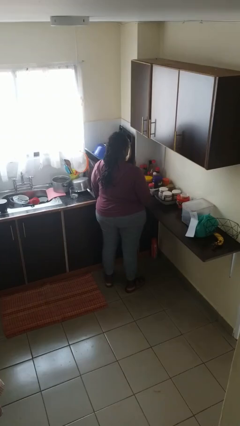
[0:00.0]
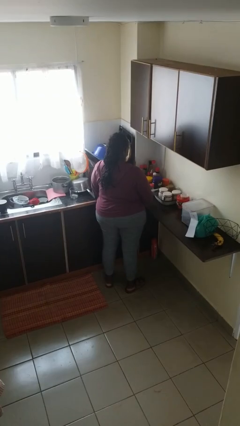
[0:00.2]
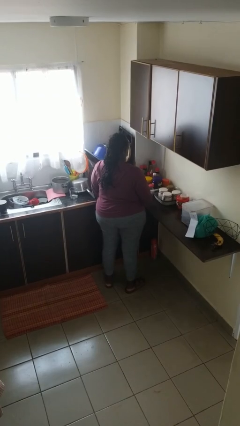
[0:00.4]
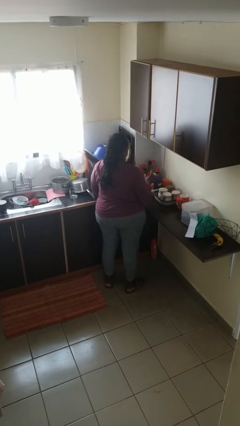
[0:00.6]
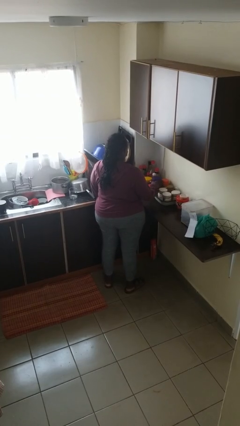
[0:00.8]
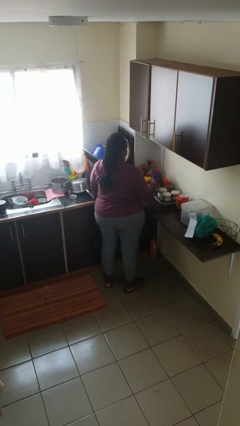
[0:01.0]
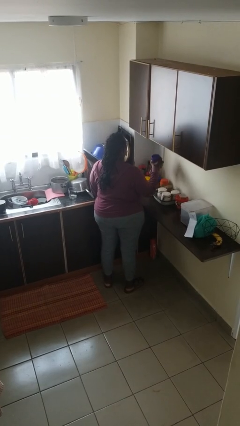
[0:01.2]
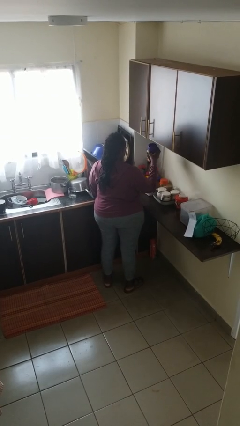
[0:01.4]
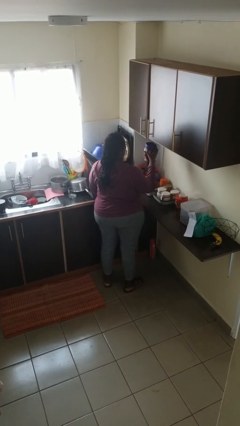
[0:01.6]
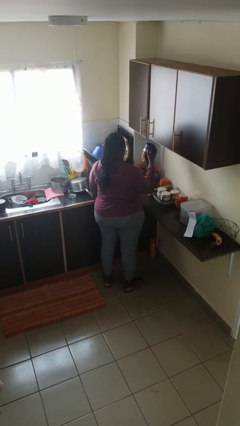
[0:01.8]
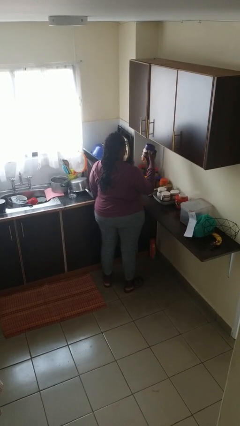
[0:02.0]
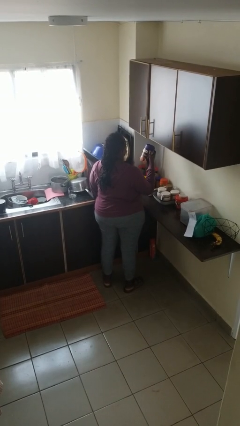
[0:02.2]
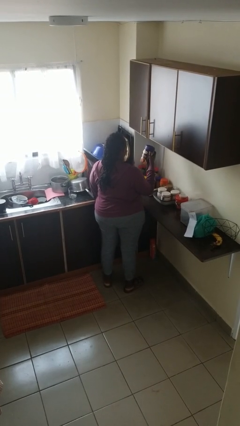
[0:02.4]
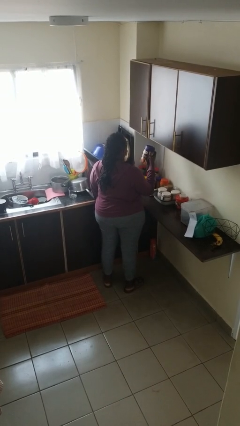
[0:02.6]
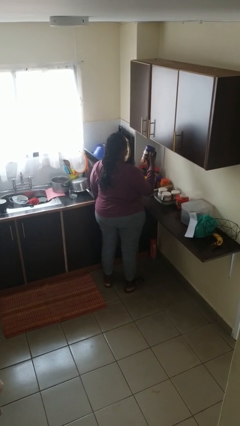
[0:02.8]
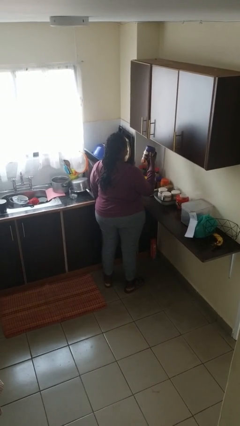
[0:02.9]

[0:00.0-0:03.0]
person picks up object from countertop

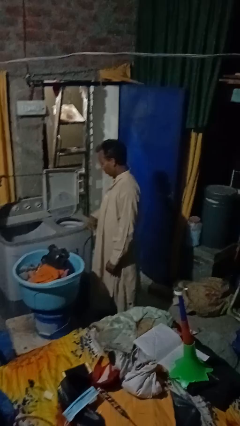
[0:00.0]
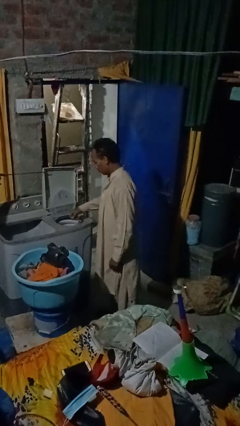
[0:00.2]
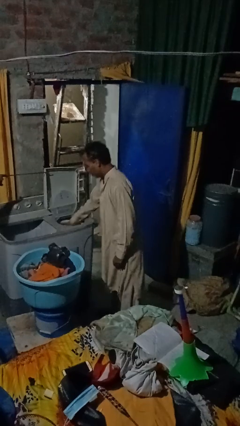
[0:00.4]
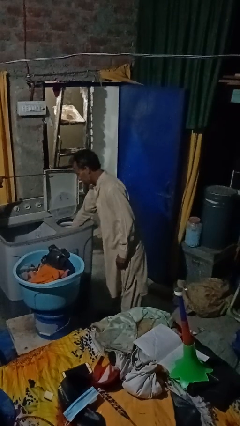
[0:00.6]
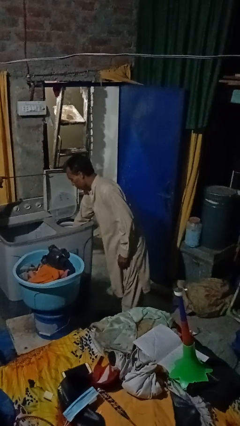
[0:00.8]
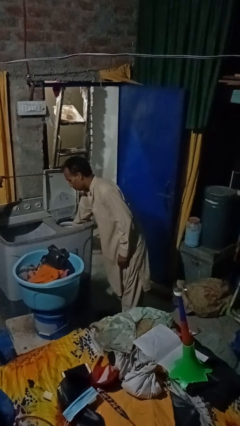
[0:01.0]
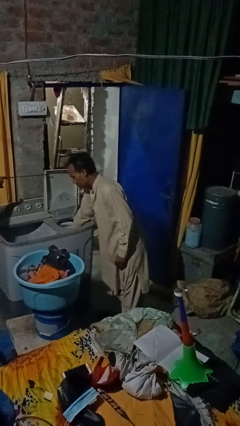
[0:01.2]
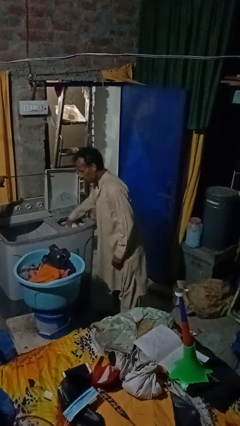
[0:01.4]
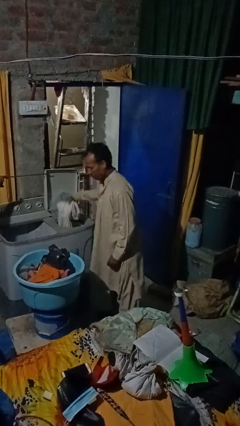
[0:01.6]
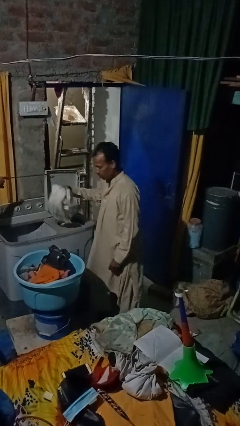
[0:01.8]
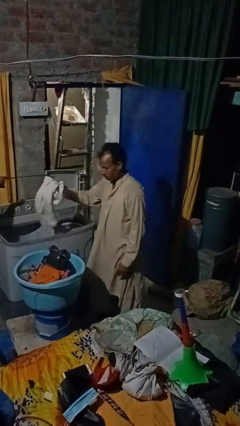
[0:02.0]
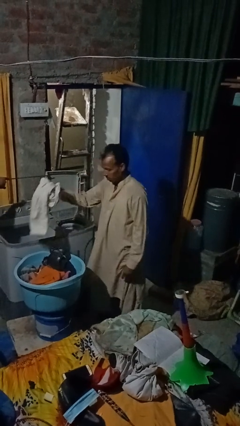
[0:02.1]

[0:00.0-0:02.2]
person unloads dryer

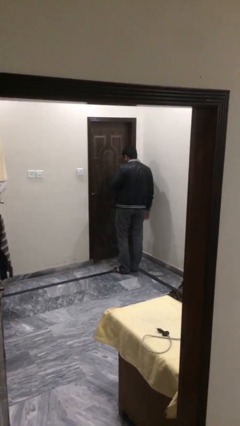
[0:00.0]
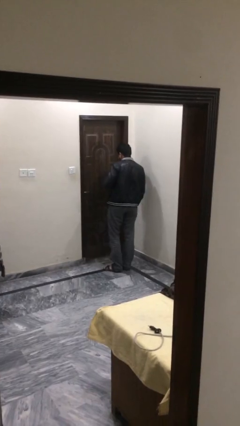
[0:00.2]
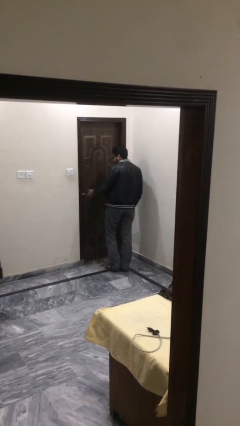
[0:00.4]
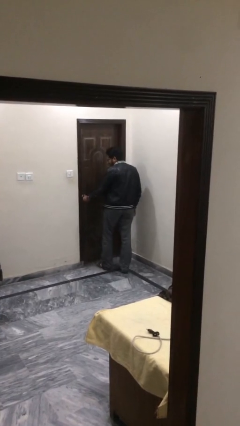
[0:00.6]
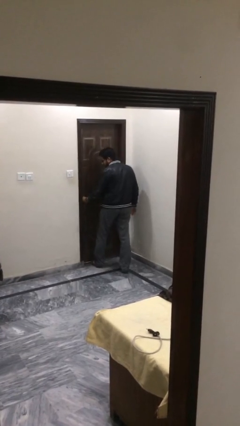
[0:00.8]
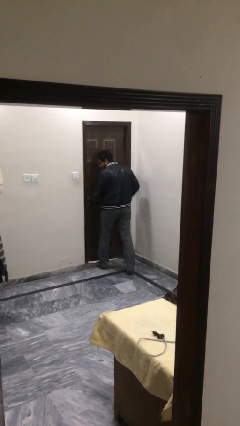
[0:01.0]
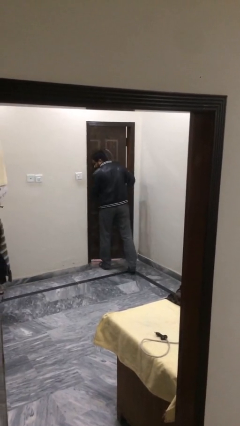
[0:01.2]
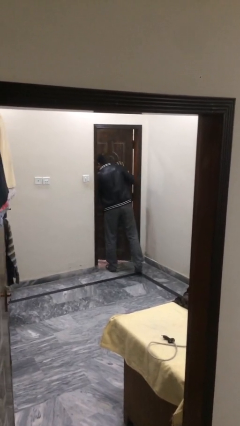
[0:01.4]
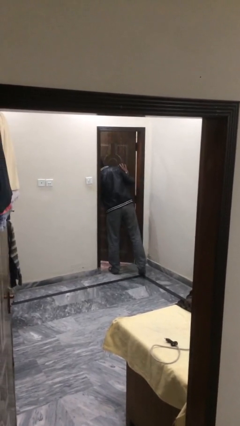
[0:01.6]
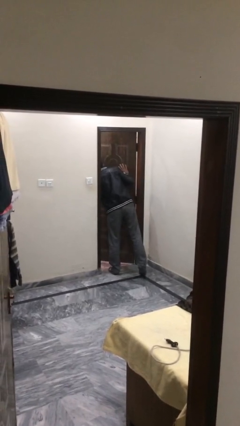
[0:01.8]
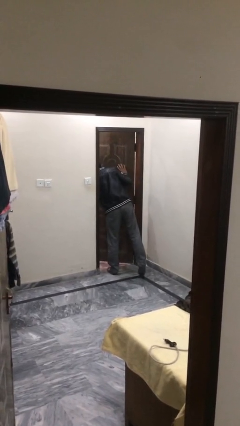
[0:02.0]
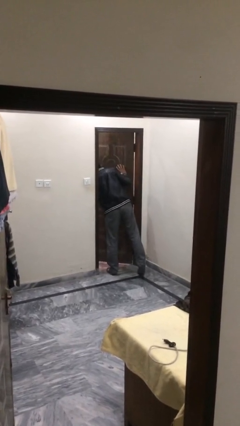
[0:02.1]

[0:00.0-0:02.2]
person opens facility door

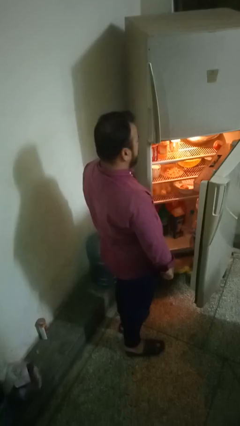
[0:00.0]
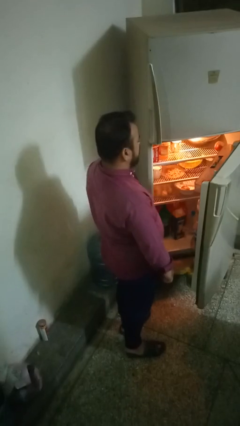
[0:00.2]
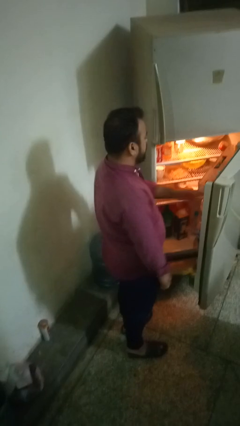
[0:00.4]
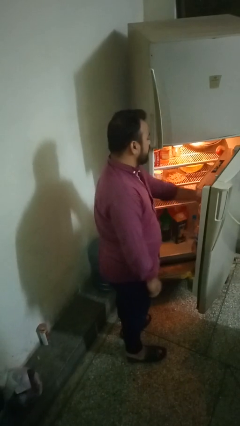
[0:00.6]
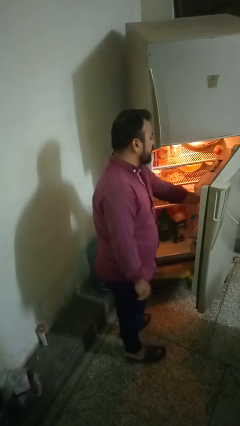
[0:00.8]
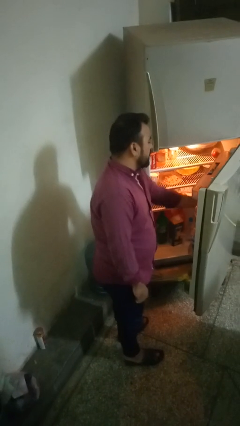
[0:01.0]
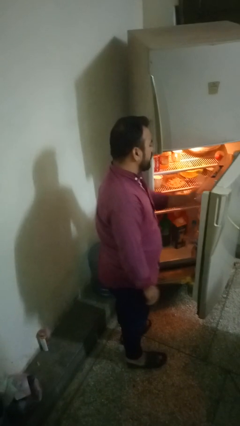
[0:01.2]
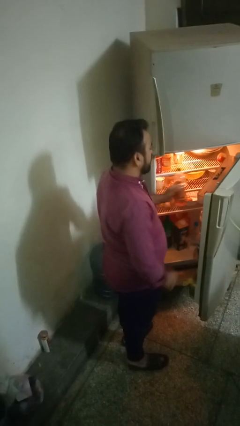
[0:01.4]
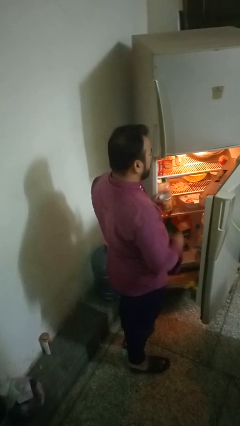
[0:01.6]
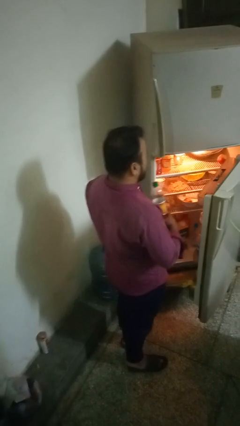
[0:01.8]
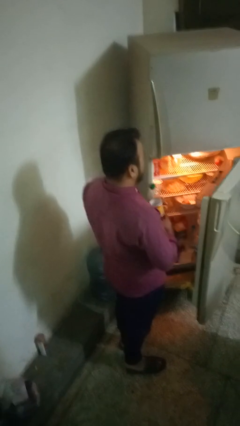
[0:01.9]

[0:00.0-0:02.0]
person takes object from refrigerator

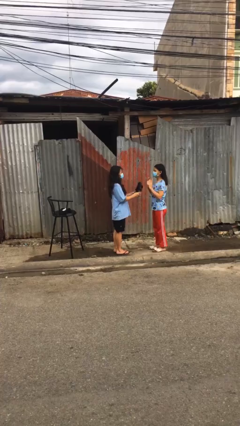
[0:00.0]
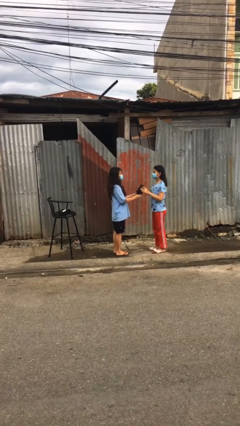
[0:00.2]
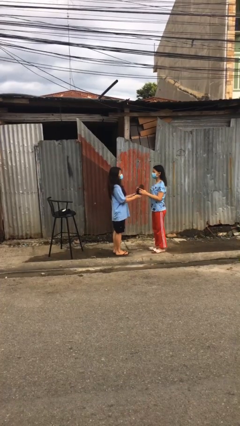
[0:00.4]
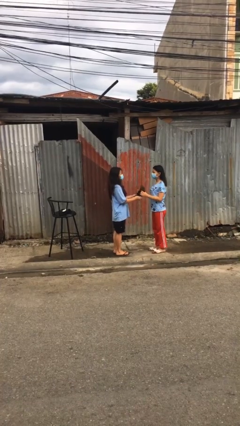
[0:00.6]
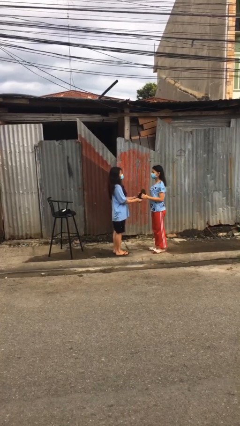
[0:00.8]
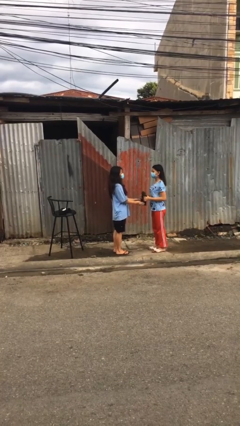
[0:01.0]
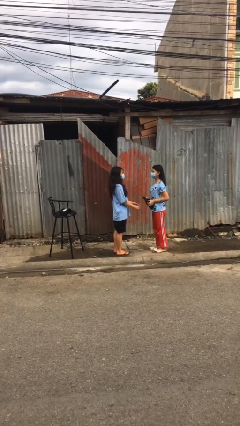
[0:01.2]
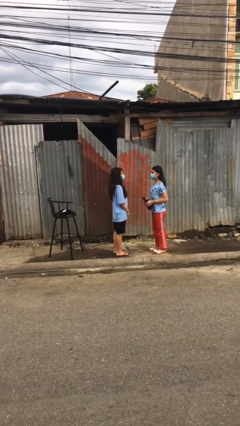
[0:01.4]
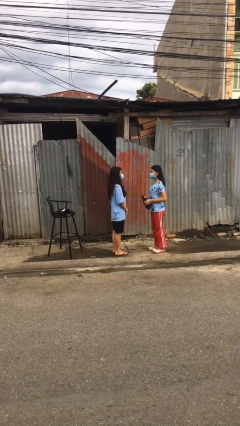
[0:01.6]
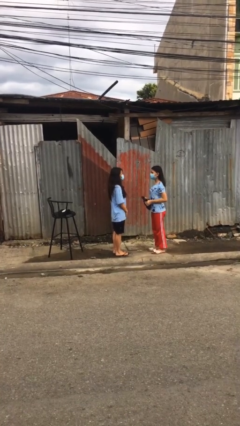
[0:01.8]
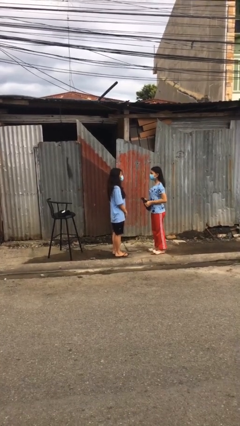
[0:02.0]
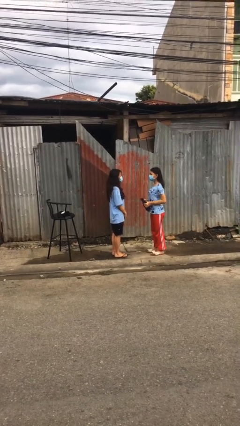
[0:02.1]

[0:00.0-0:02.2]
person transfers object to person

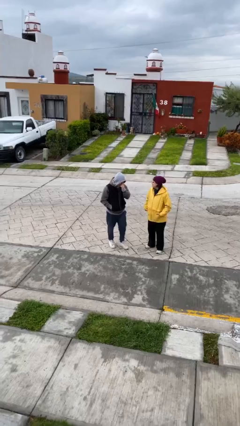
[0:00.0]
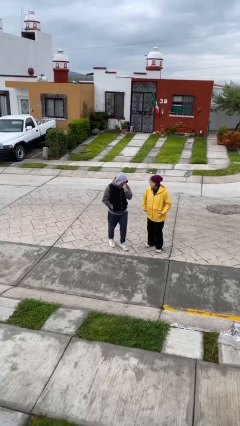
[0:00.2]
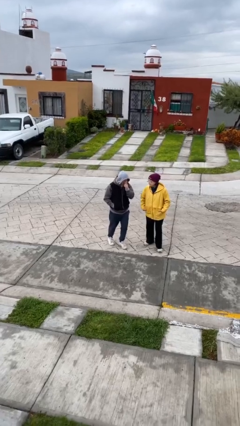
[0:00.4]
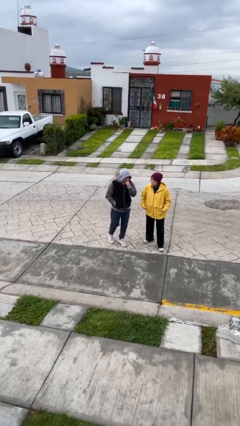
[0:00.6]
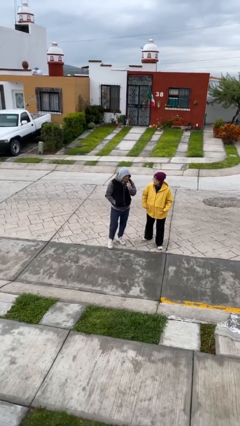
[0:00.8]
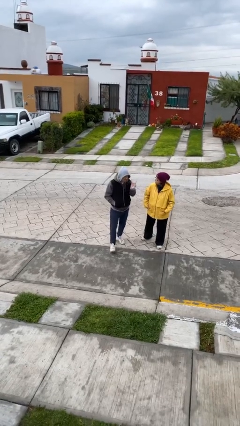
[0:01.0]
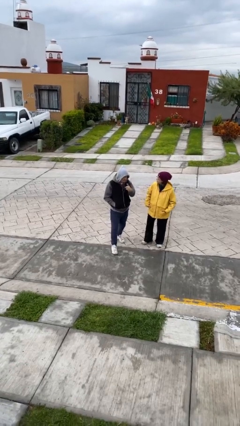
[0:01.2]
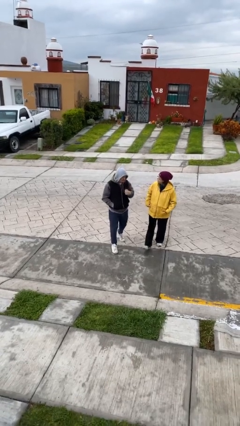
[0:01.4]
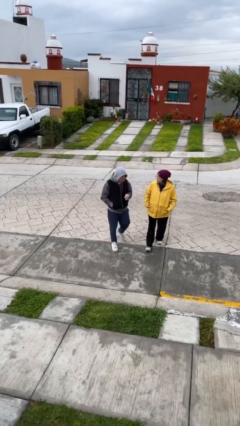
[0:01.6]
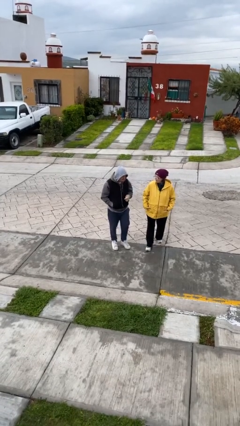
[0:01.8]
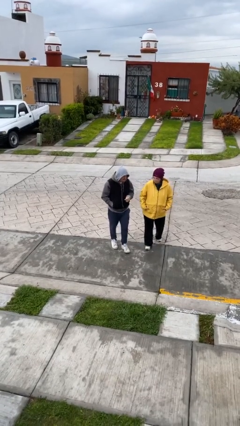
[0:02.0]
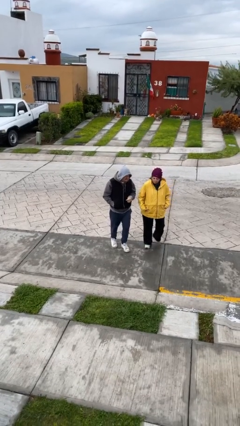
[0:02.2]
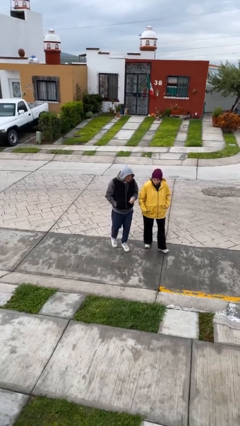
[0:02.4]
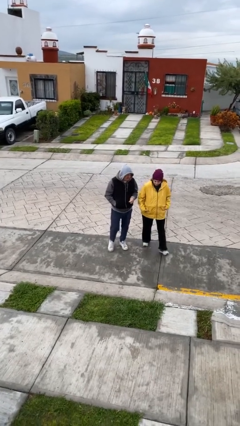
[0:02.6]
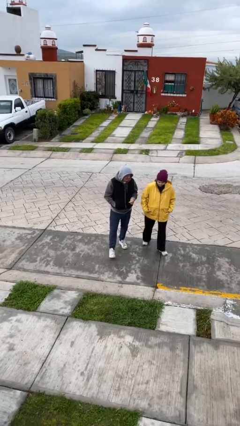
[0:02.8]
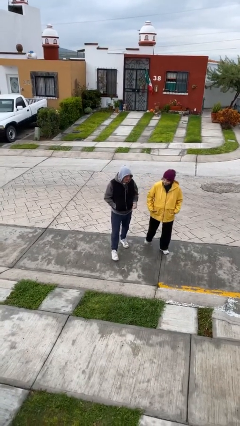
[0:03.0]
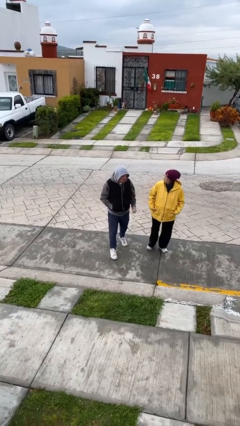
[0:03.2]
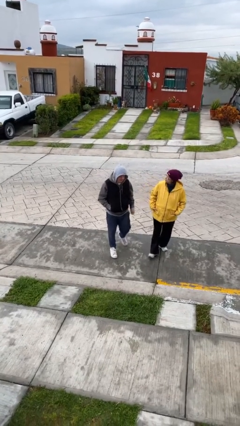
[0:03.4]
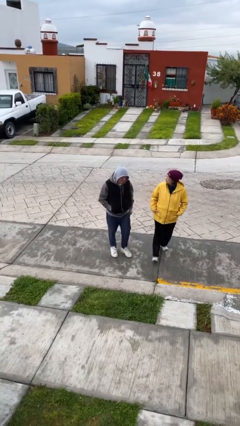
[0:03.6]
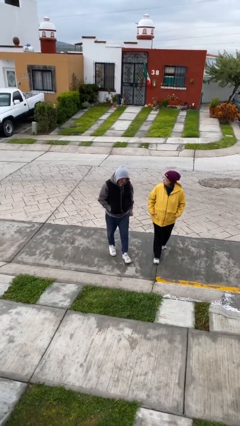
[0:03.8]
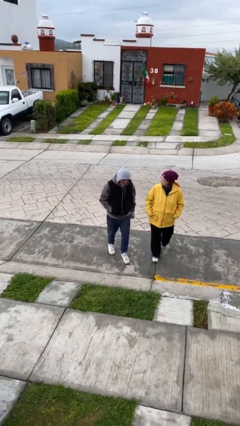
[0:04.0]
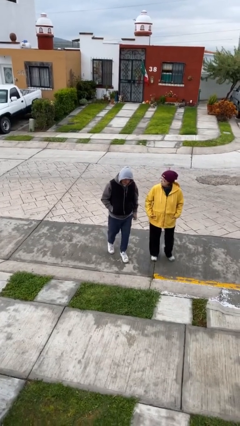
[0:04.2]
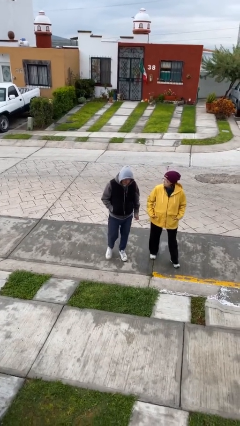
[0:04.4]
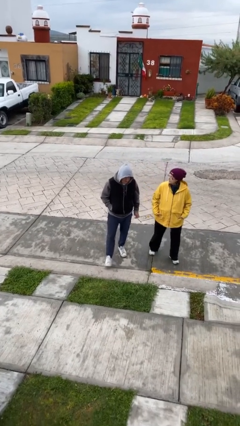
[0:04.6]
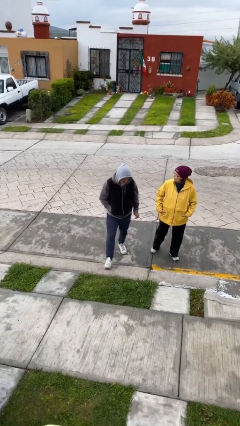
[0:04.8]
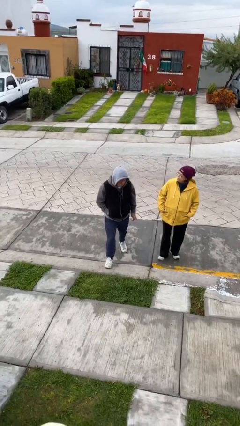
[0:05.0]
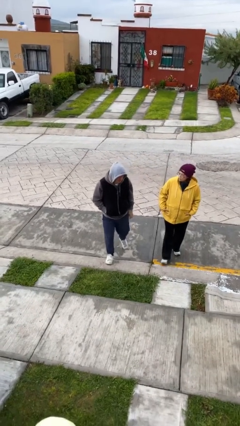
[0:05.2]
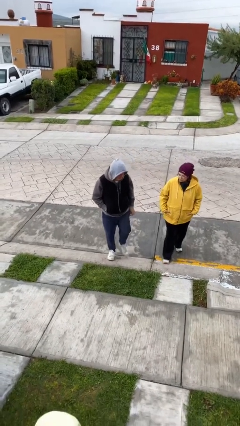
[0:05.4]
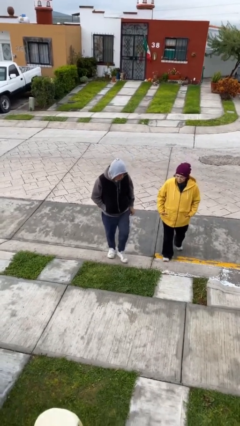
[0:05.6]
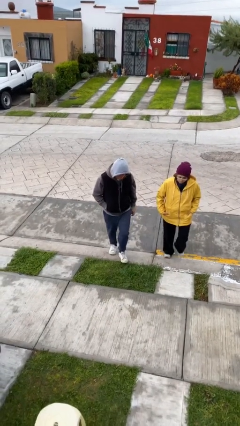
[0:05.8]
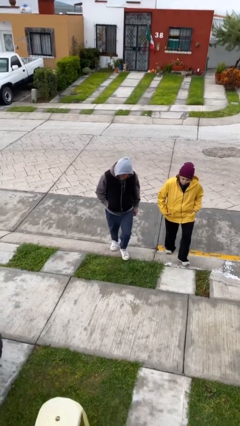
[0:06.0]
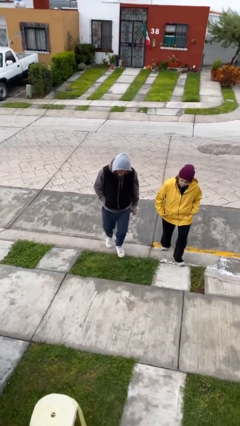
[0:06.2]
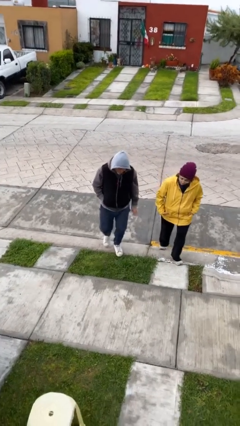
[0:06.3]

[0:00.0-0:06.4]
person talks to person
